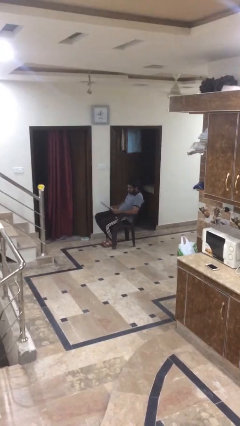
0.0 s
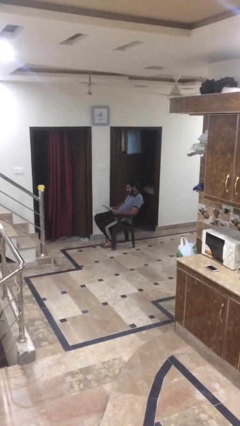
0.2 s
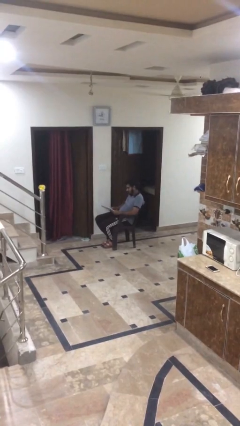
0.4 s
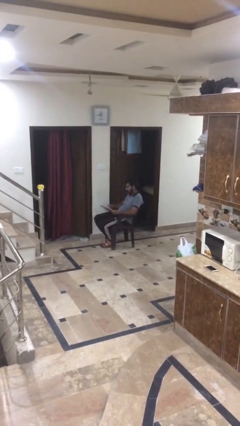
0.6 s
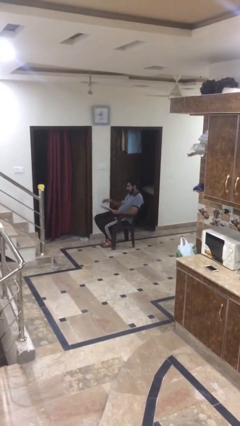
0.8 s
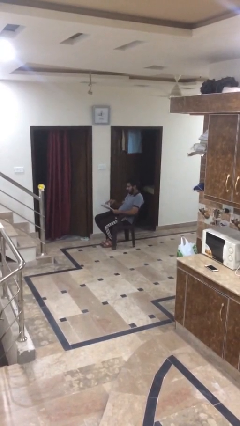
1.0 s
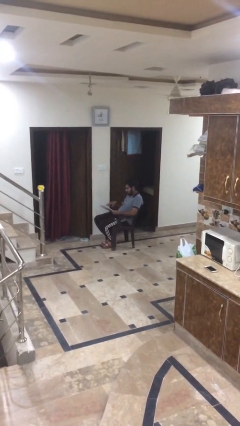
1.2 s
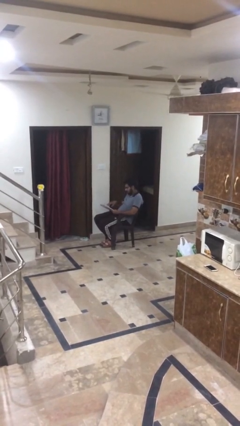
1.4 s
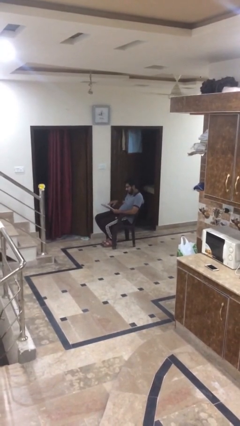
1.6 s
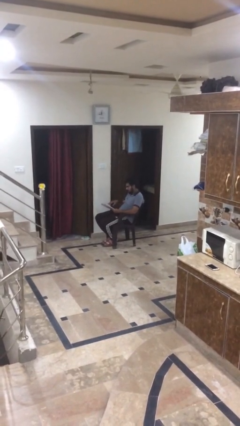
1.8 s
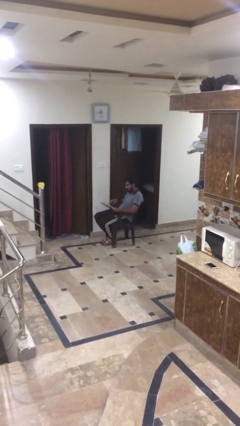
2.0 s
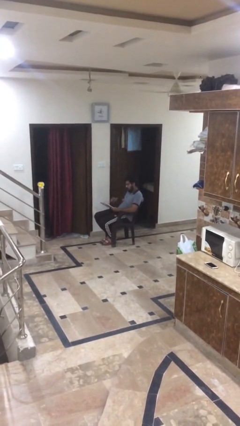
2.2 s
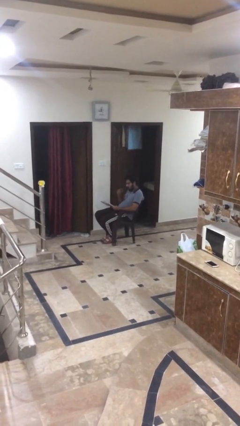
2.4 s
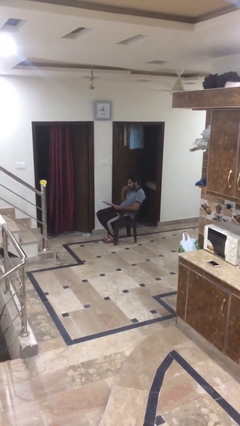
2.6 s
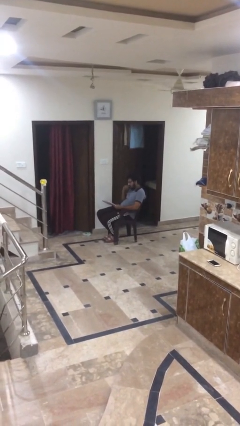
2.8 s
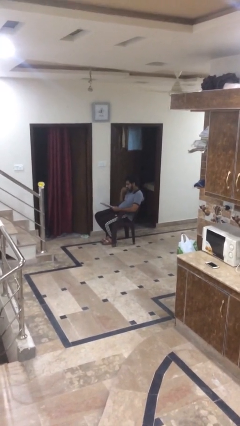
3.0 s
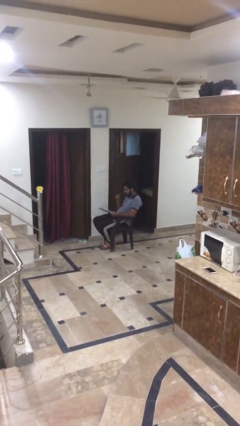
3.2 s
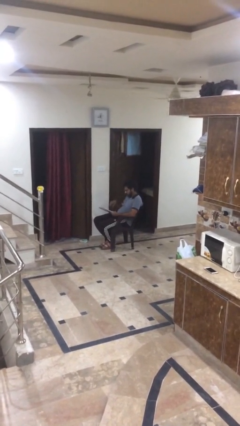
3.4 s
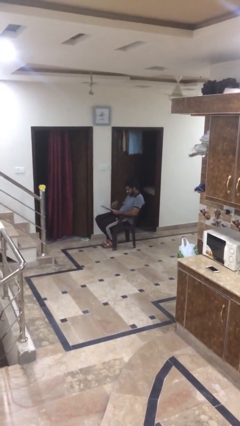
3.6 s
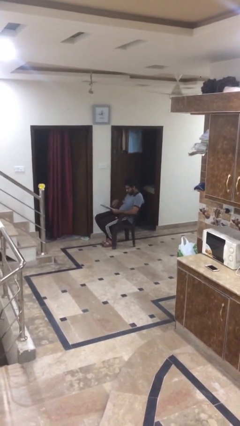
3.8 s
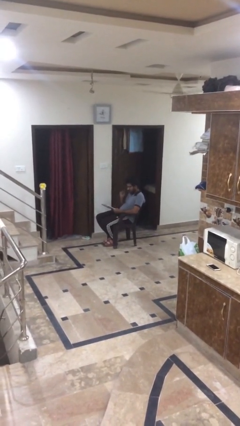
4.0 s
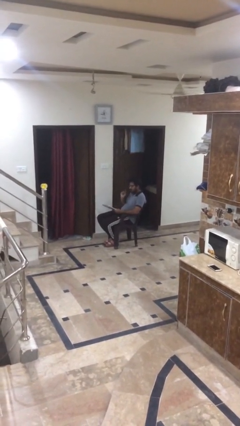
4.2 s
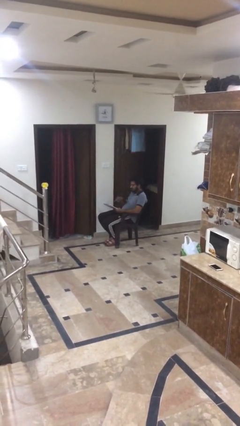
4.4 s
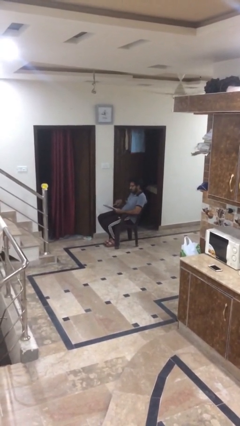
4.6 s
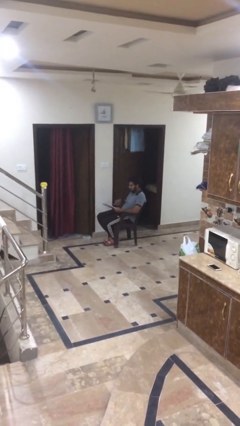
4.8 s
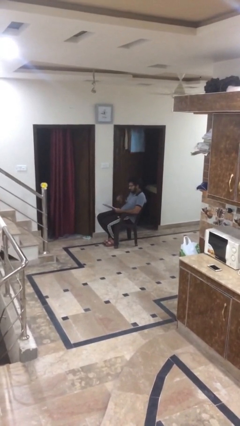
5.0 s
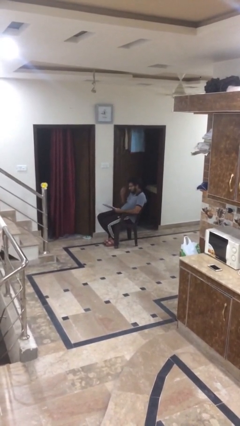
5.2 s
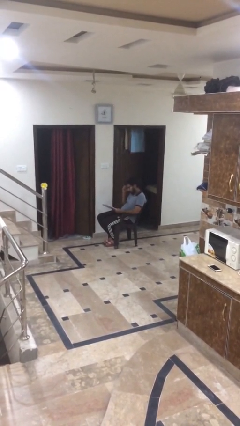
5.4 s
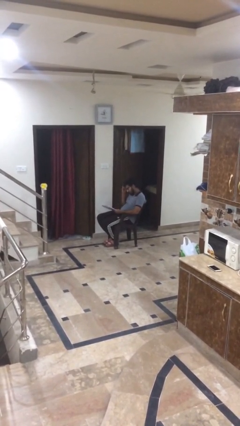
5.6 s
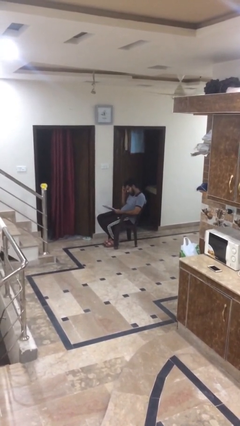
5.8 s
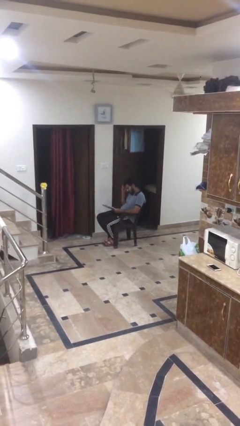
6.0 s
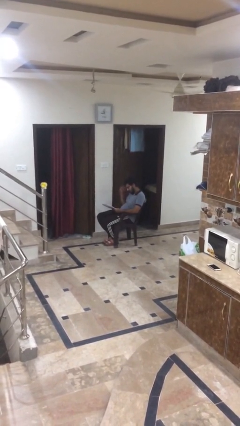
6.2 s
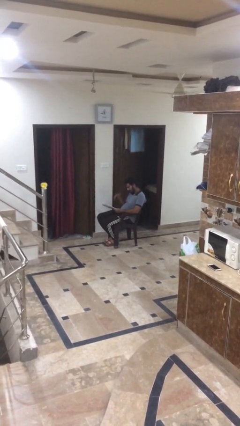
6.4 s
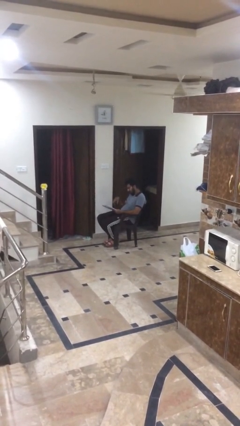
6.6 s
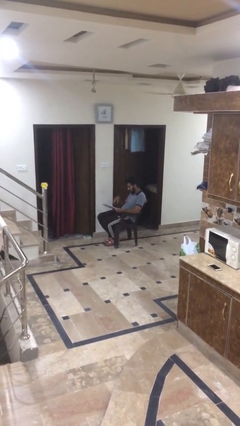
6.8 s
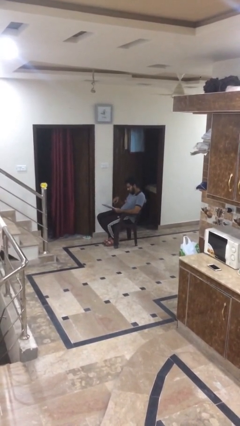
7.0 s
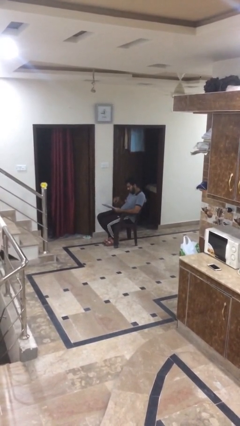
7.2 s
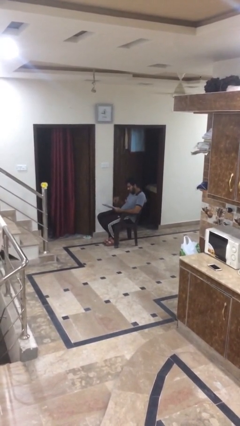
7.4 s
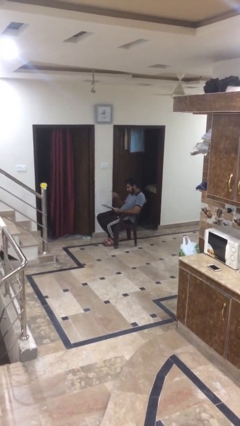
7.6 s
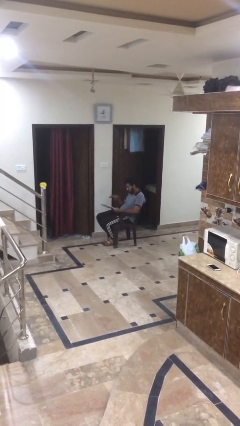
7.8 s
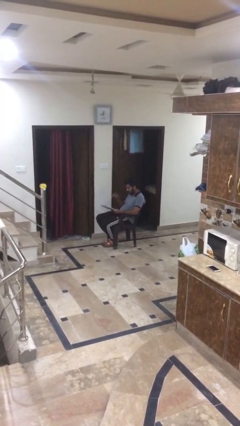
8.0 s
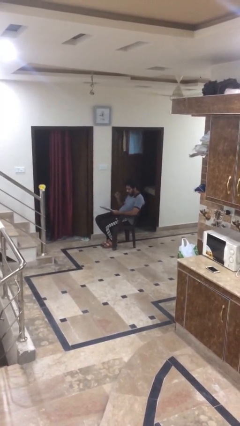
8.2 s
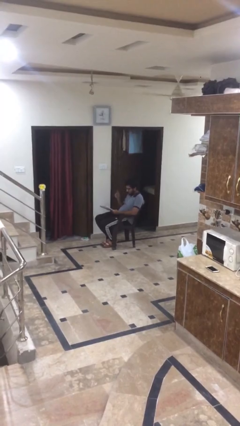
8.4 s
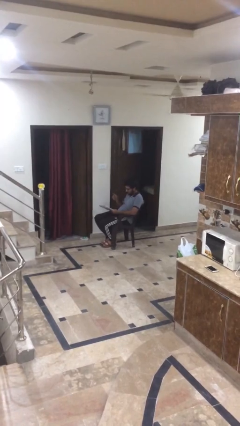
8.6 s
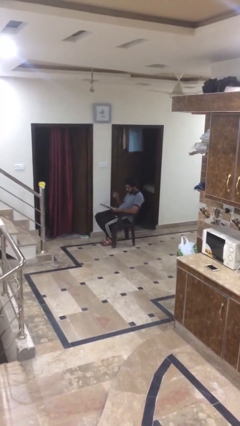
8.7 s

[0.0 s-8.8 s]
person reads document

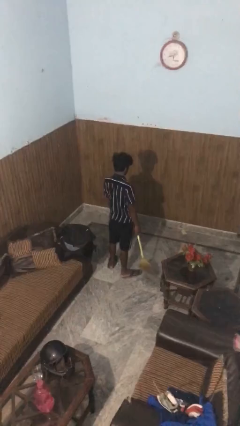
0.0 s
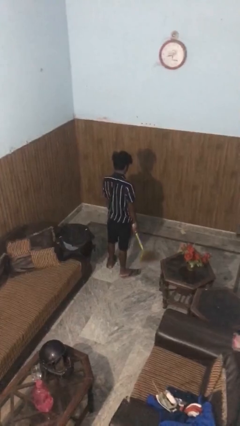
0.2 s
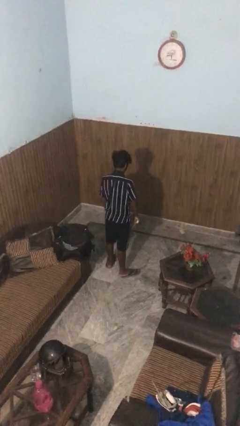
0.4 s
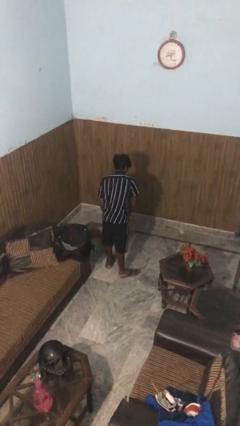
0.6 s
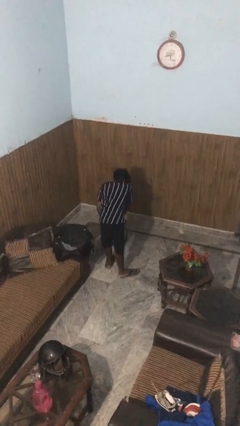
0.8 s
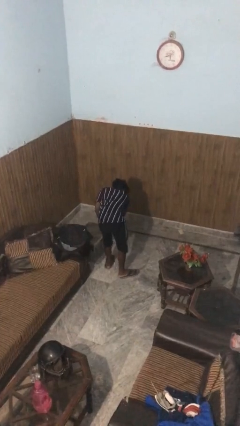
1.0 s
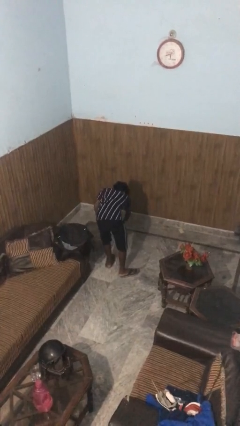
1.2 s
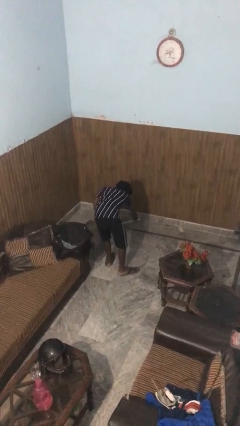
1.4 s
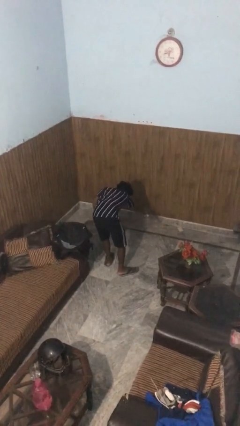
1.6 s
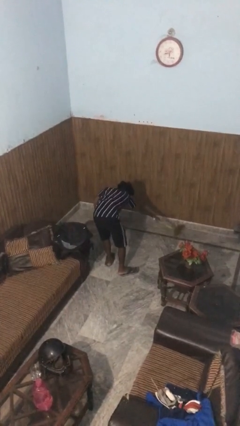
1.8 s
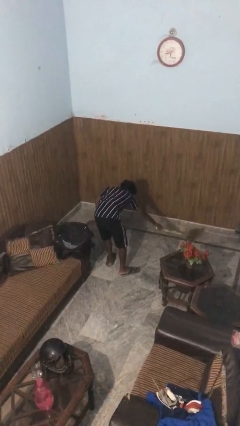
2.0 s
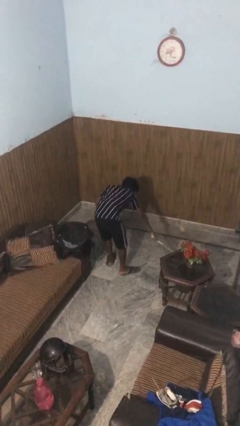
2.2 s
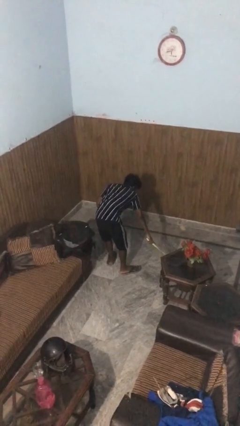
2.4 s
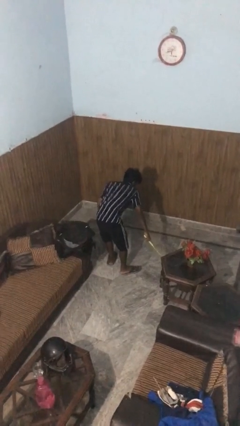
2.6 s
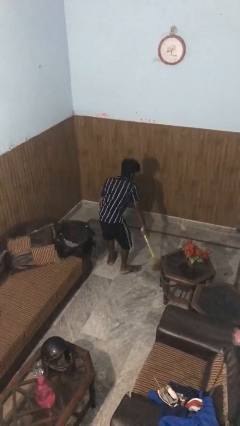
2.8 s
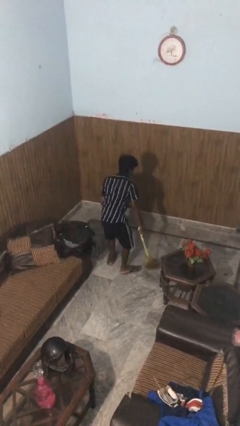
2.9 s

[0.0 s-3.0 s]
person sweeps floor

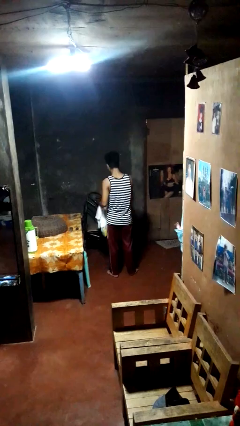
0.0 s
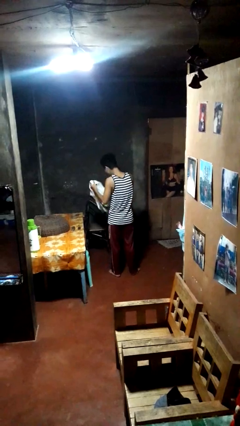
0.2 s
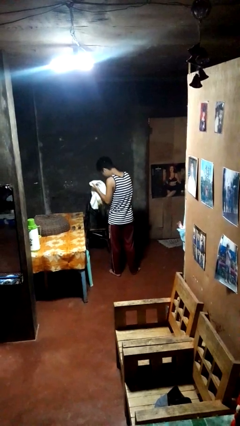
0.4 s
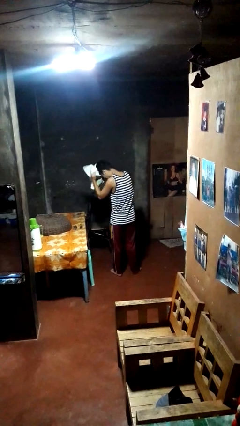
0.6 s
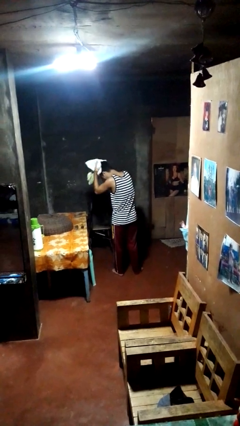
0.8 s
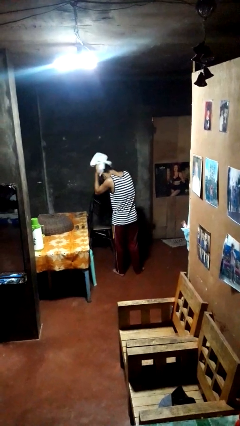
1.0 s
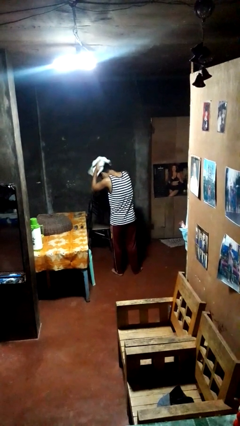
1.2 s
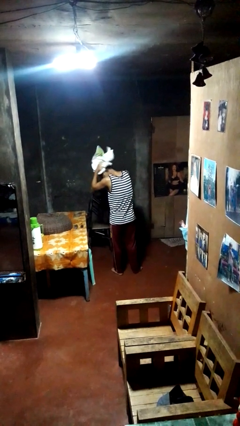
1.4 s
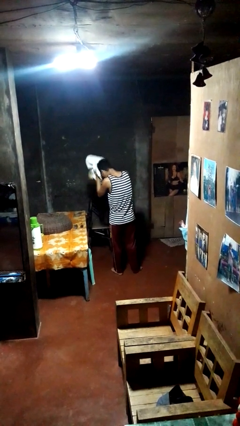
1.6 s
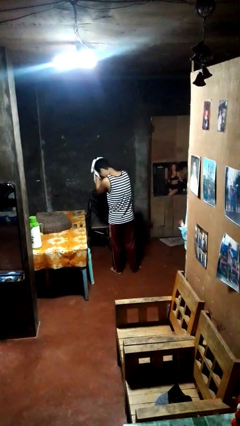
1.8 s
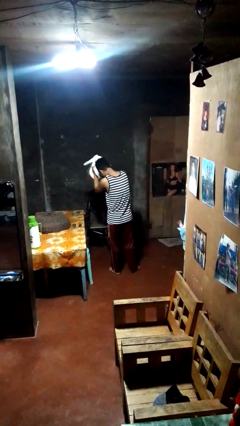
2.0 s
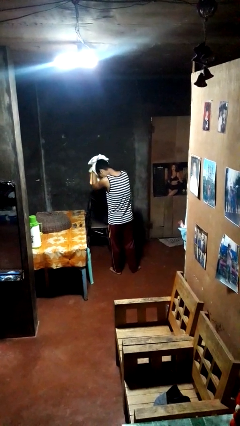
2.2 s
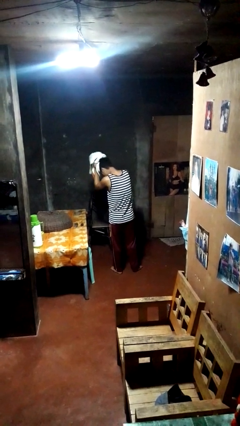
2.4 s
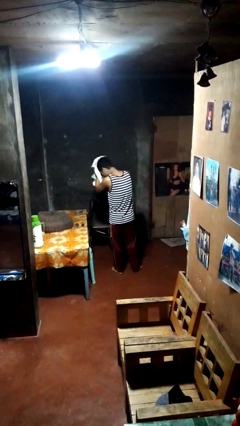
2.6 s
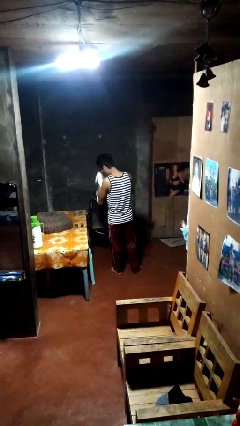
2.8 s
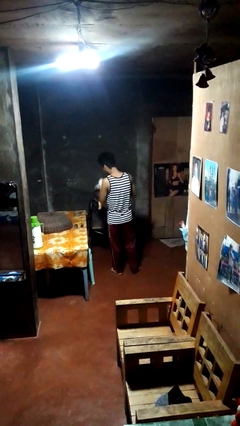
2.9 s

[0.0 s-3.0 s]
person dries hair with towel

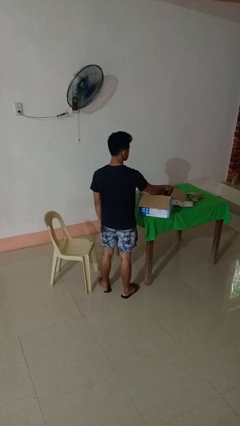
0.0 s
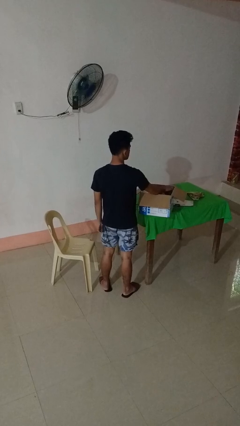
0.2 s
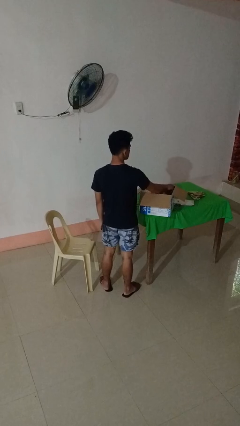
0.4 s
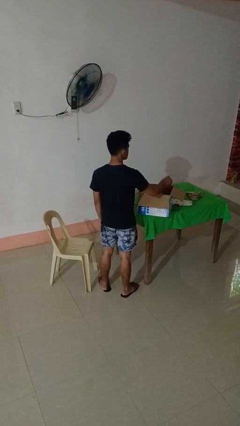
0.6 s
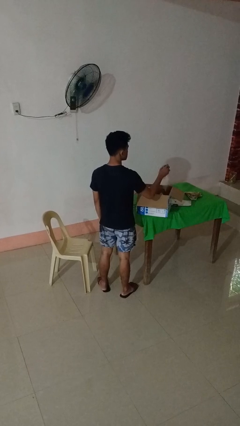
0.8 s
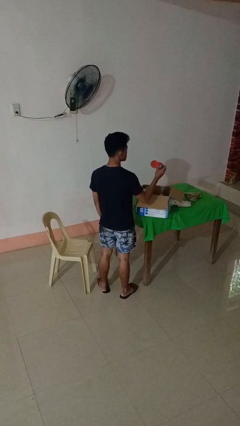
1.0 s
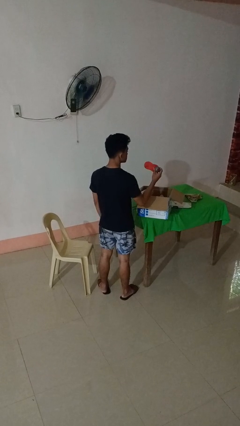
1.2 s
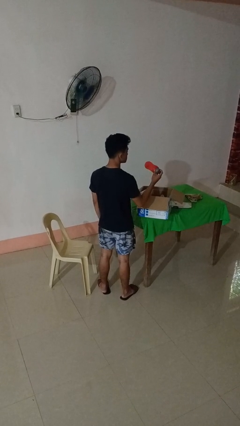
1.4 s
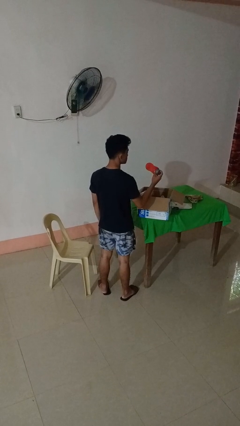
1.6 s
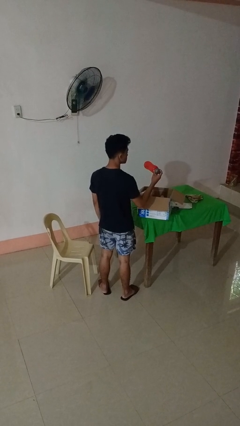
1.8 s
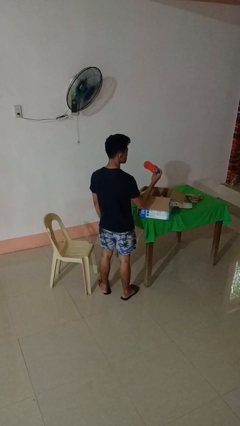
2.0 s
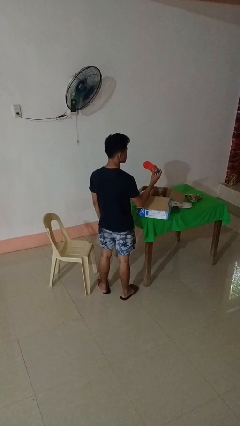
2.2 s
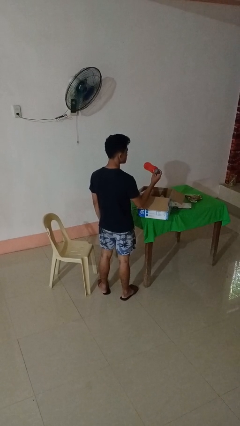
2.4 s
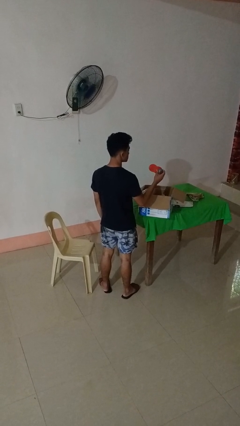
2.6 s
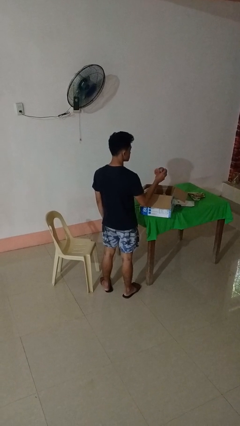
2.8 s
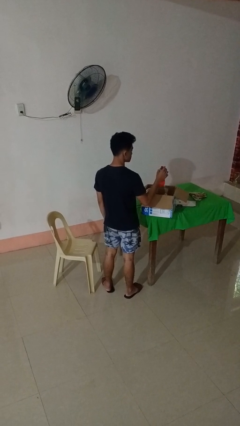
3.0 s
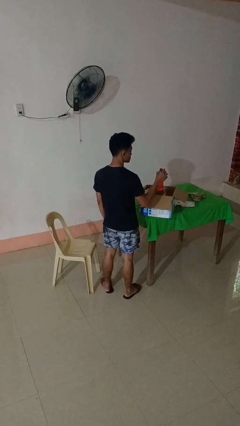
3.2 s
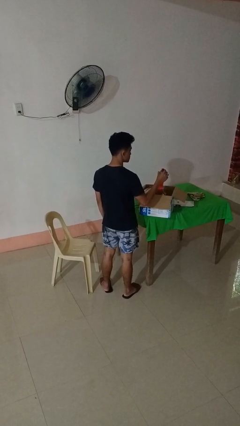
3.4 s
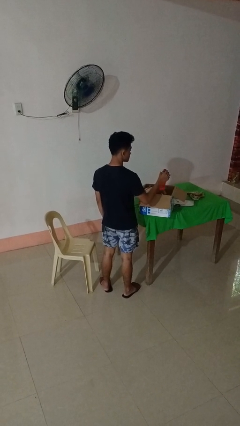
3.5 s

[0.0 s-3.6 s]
person takes object from box
